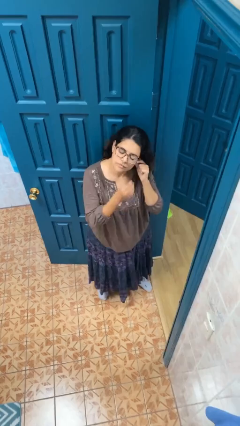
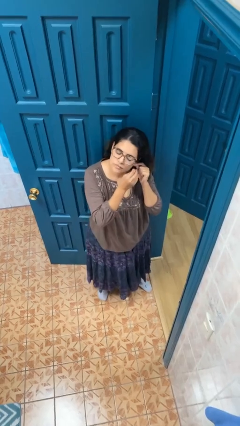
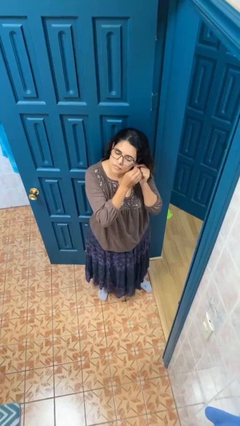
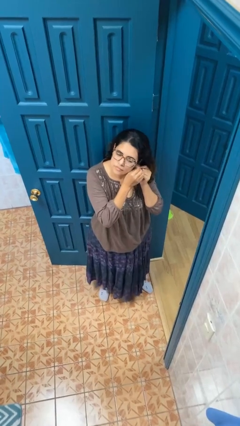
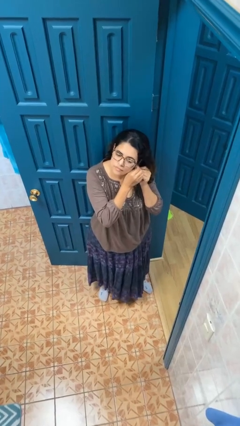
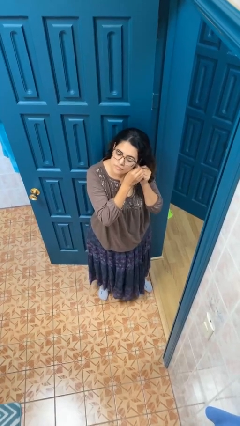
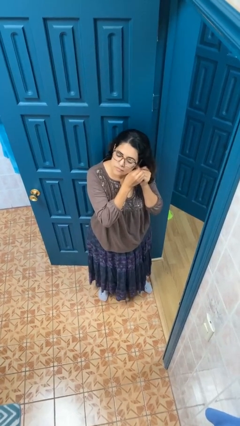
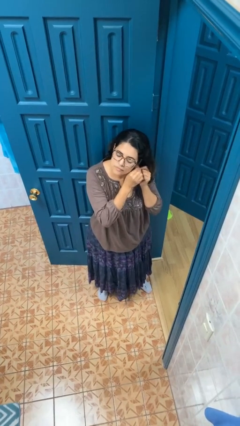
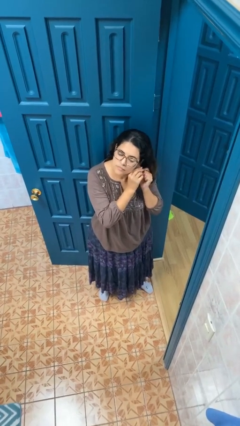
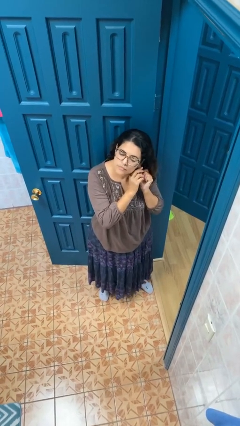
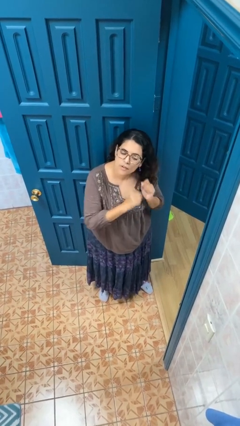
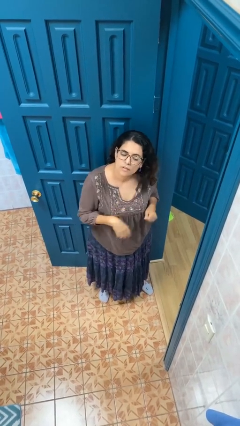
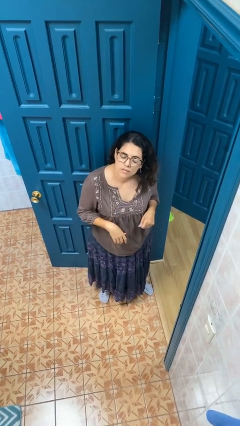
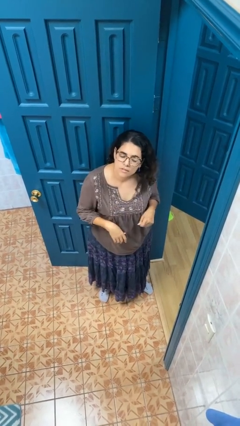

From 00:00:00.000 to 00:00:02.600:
person puts on earrings

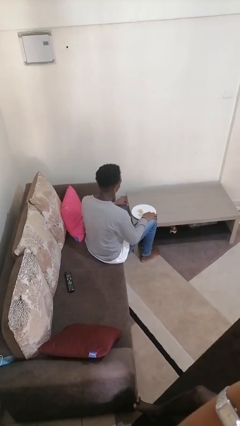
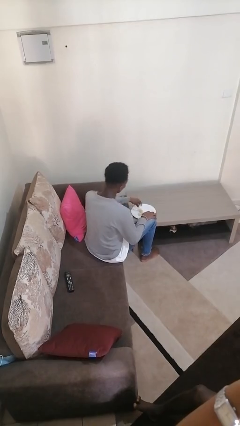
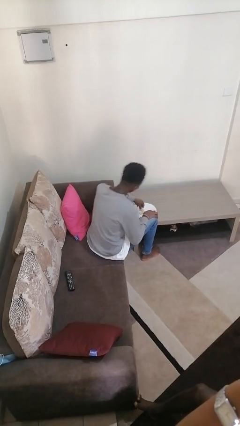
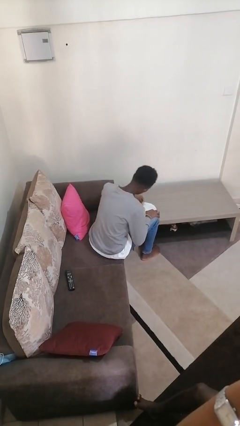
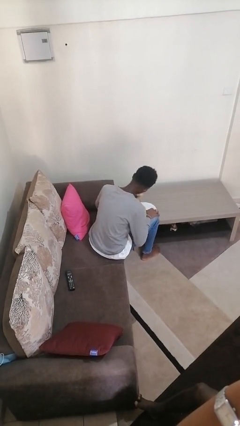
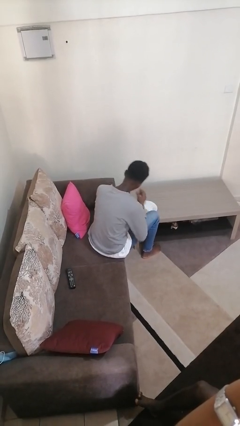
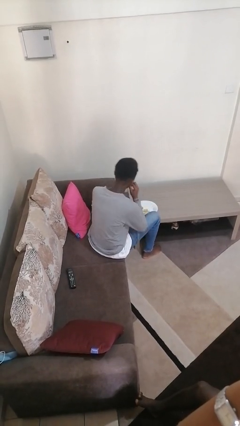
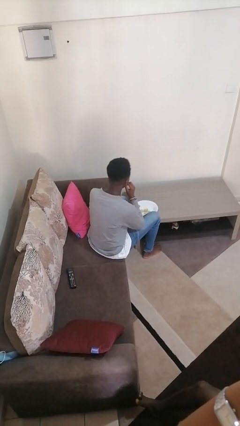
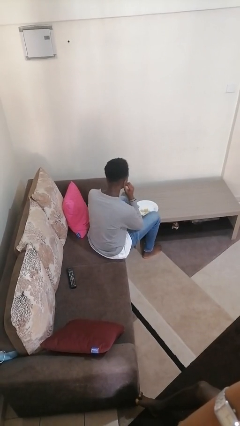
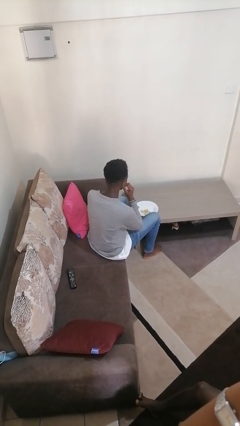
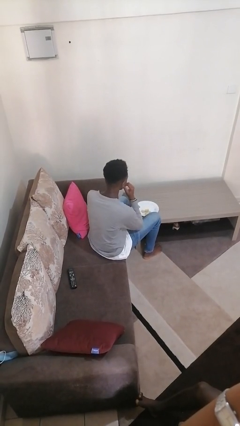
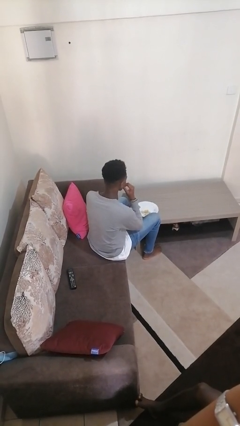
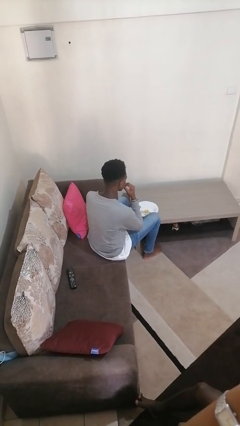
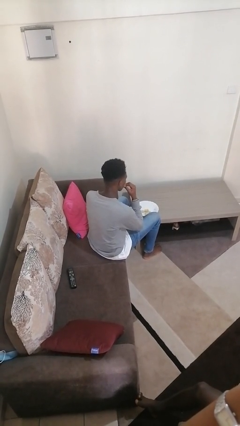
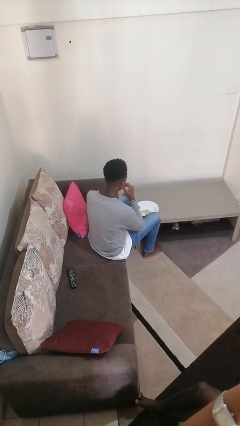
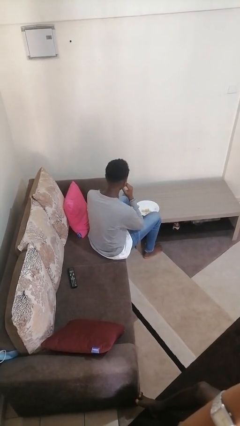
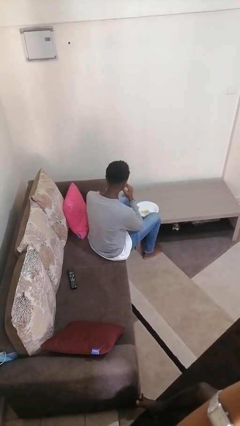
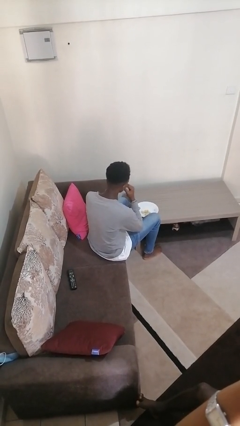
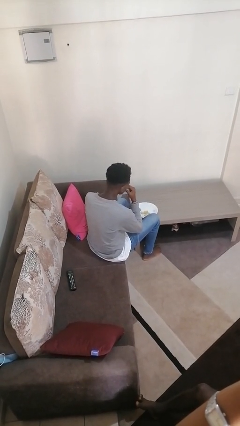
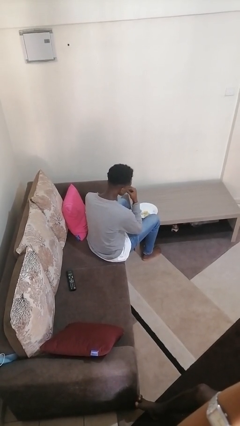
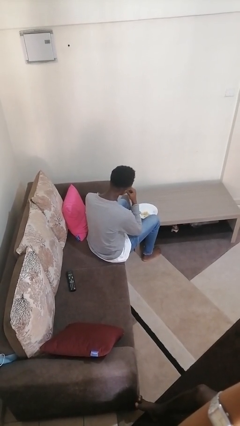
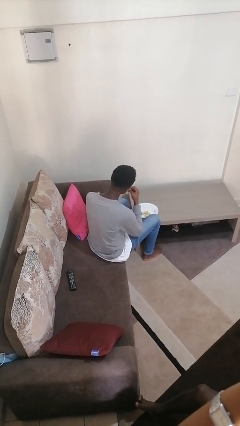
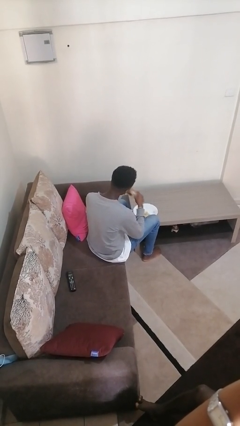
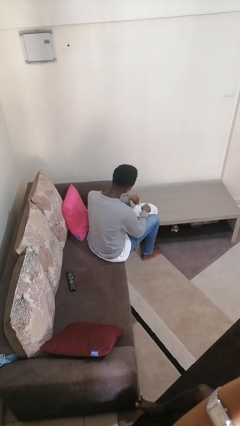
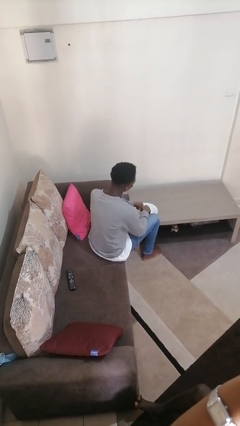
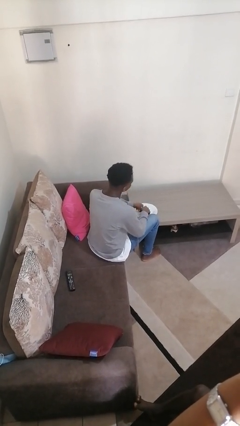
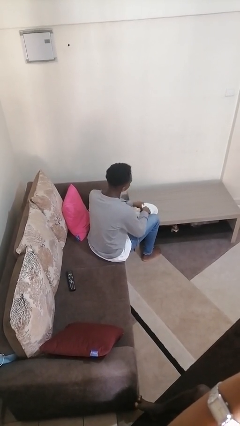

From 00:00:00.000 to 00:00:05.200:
person eats with hands

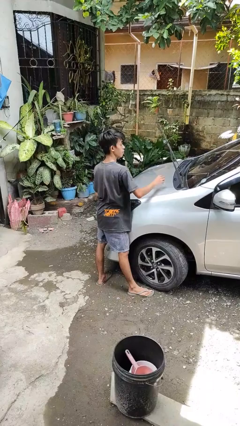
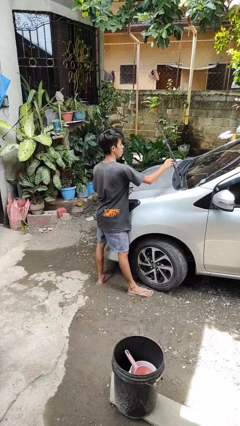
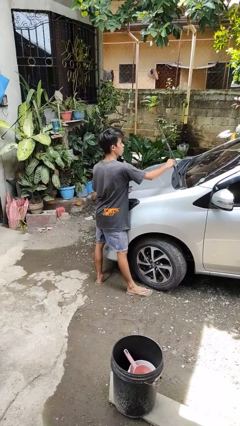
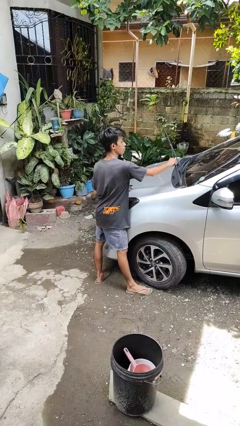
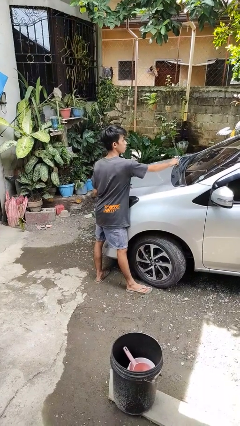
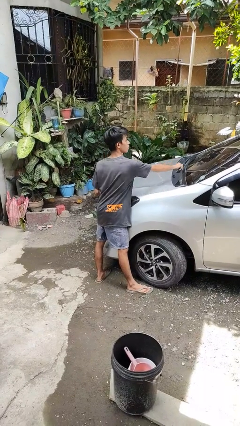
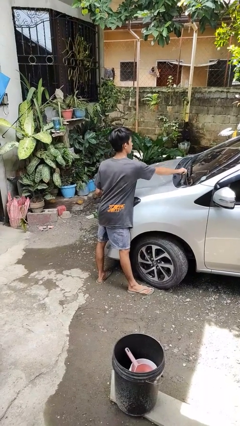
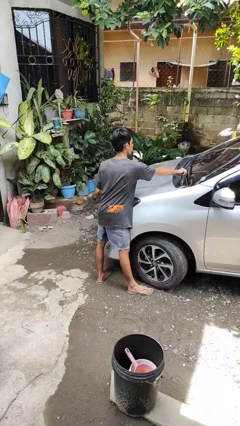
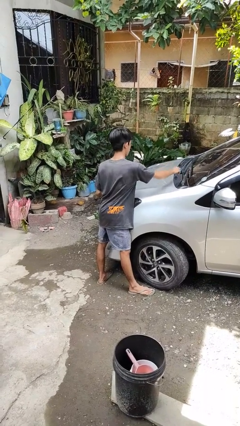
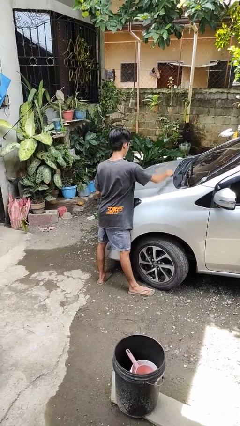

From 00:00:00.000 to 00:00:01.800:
person flips down car wipers

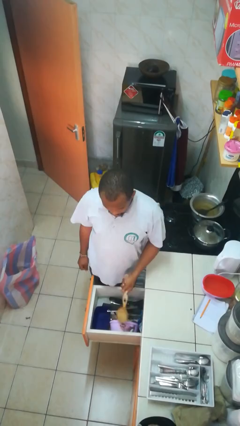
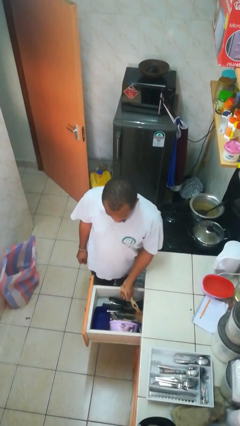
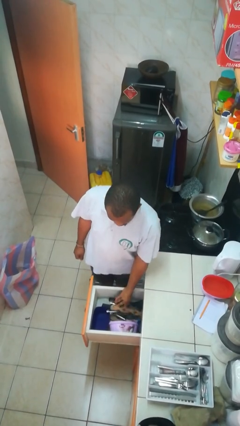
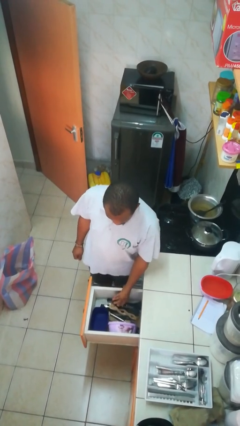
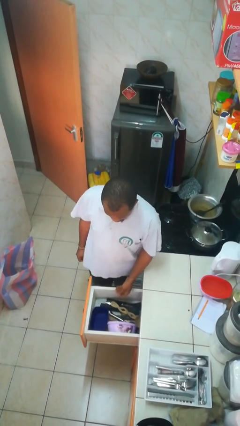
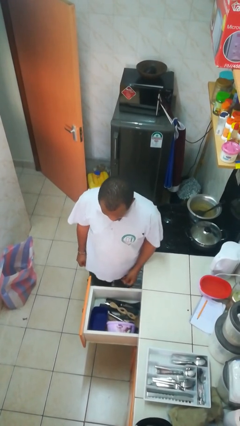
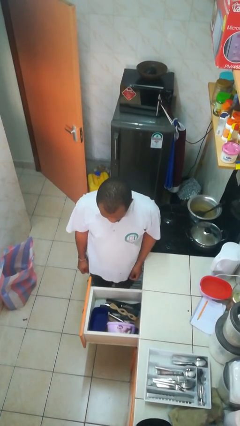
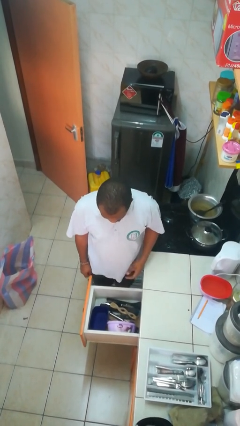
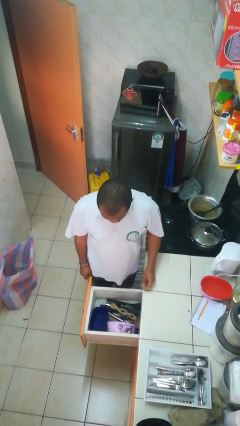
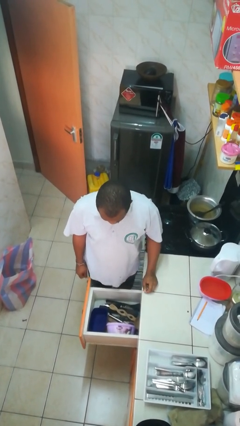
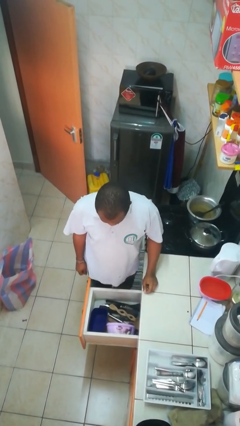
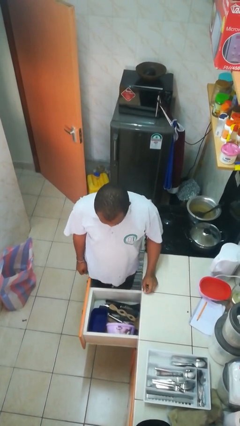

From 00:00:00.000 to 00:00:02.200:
person puts object into kitchen drawer

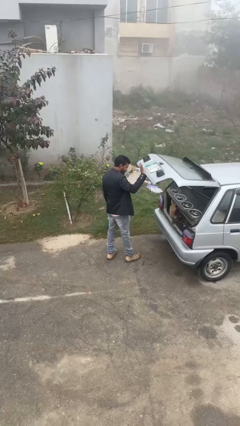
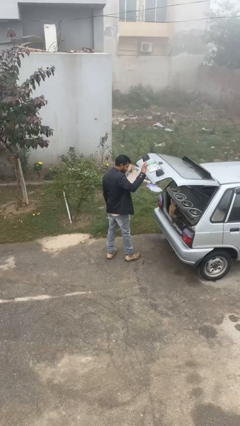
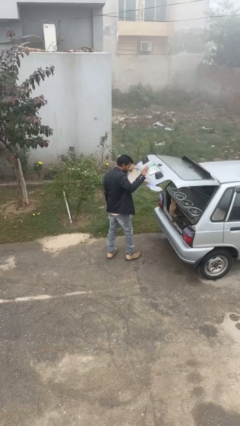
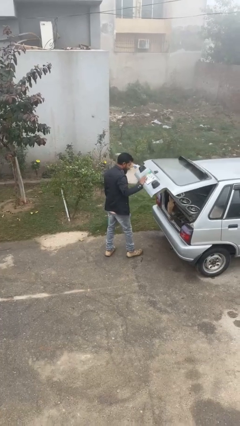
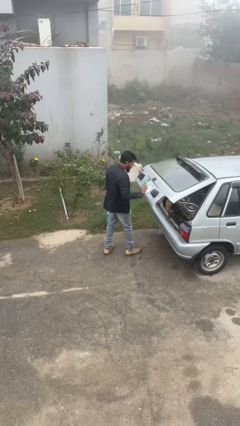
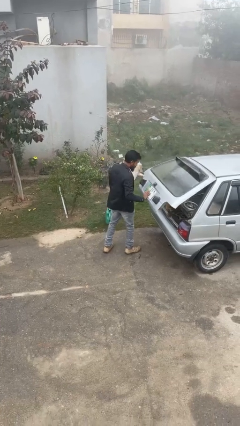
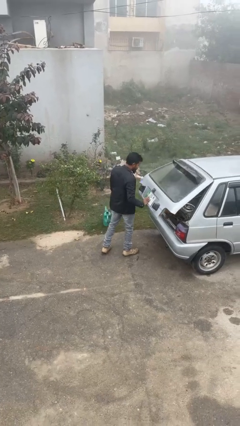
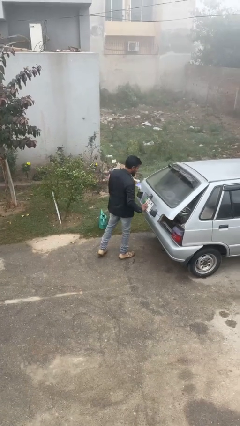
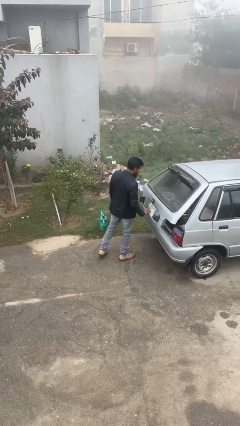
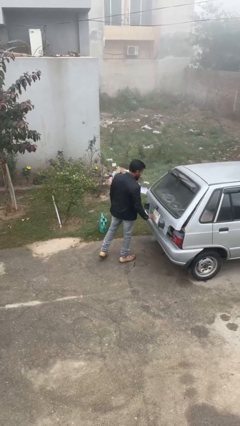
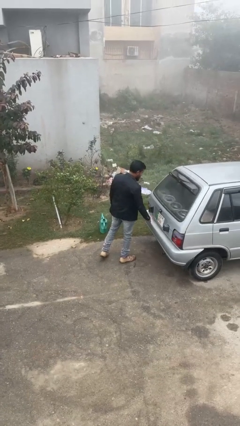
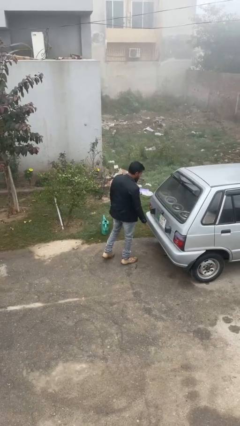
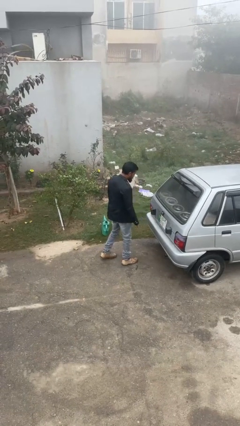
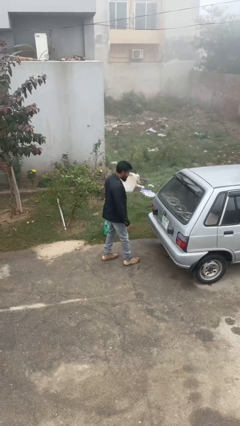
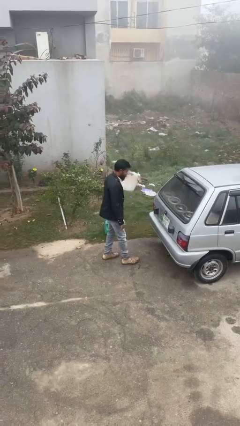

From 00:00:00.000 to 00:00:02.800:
person closes car trunk

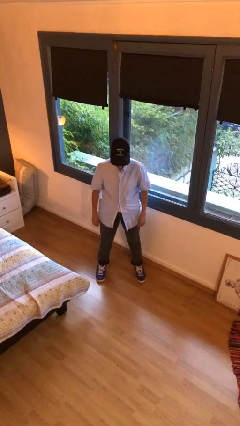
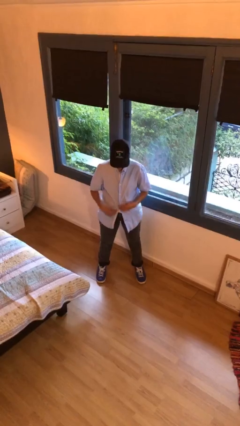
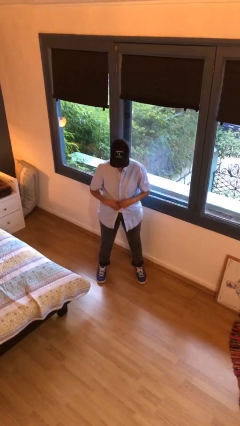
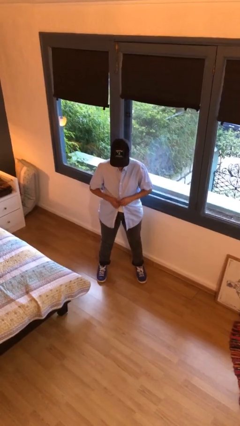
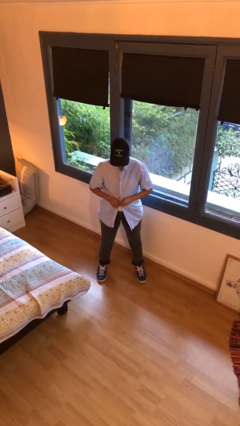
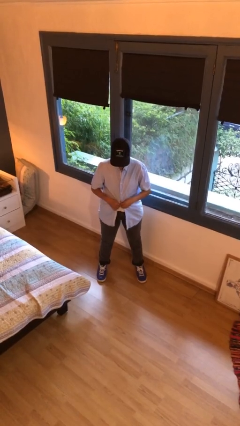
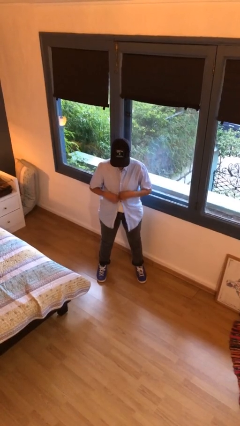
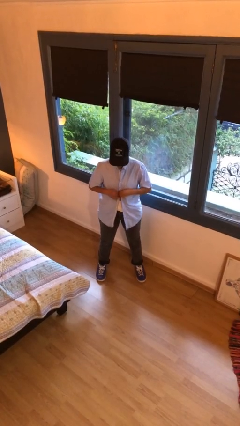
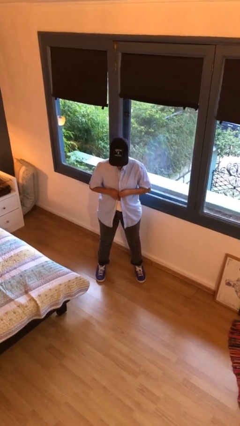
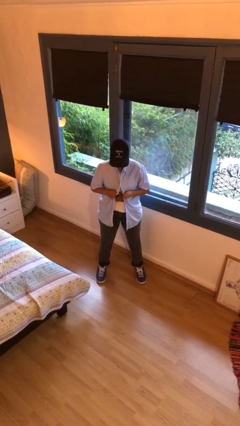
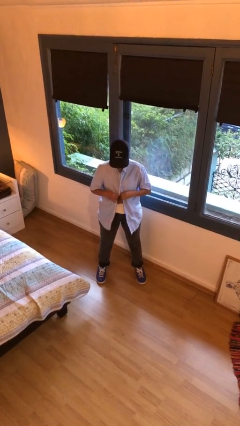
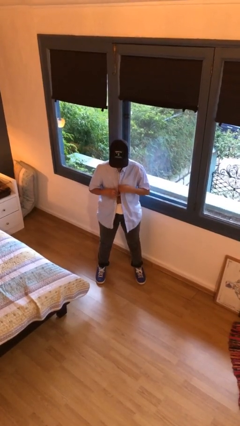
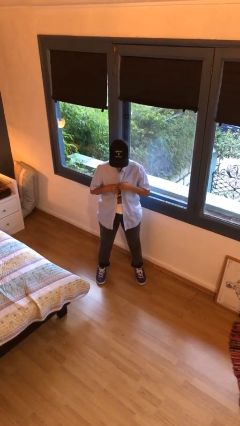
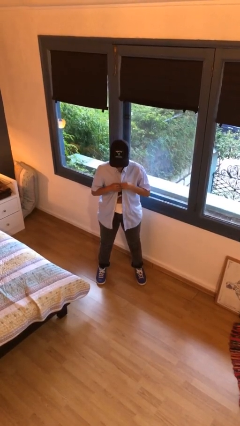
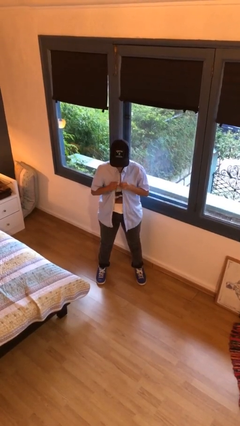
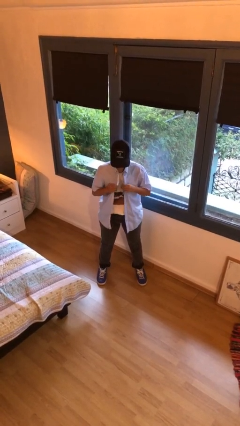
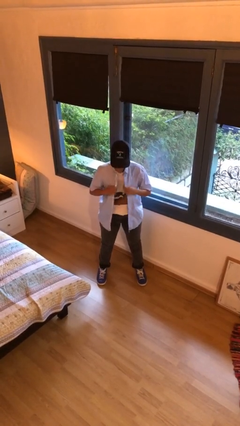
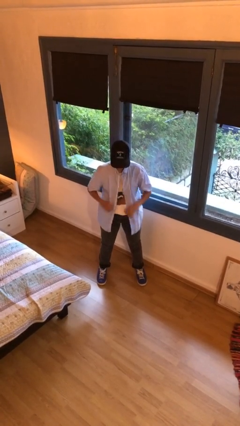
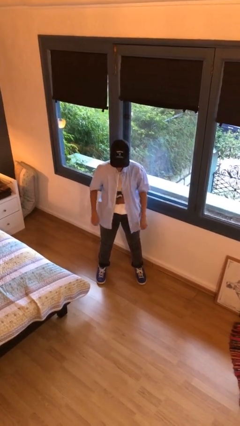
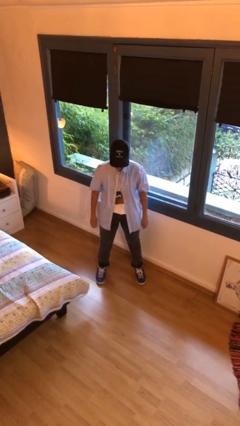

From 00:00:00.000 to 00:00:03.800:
person unbuttons shirt
